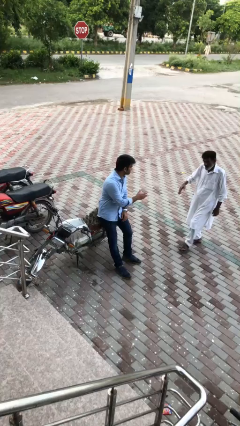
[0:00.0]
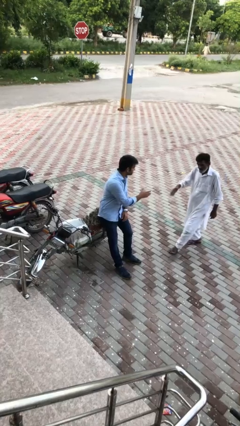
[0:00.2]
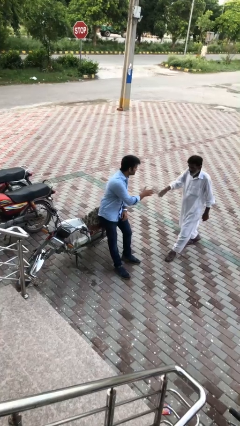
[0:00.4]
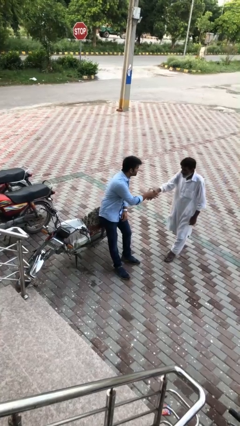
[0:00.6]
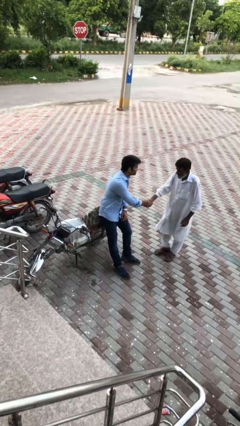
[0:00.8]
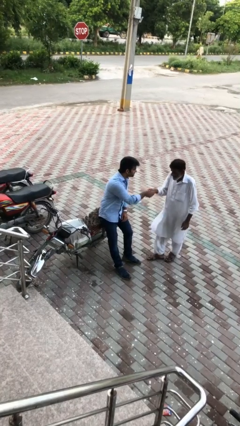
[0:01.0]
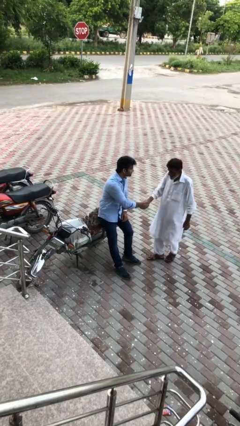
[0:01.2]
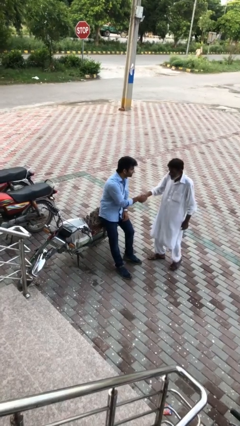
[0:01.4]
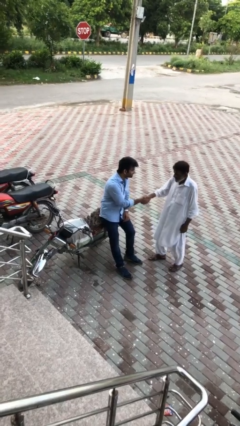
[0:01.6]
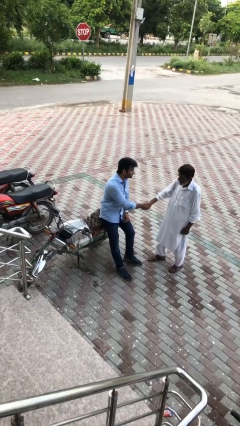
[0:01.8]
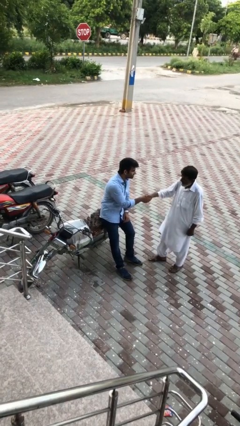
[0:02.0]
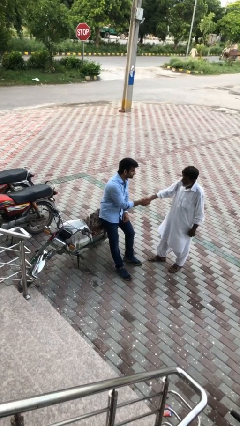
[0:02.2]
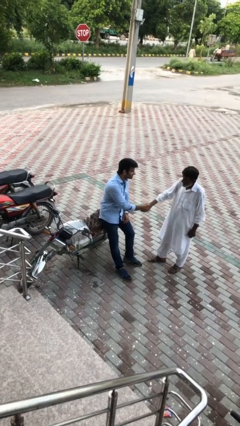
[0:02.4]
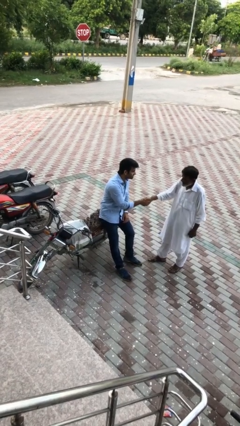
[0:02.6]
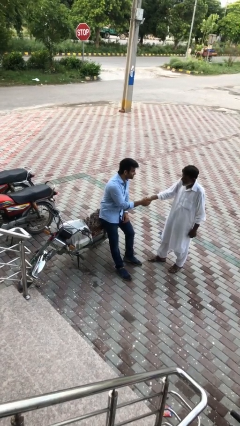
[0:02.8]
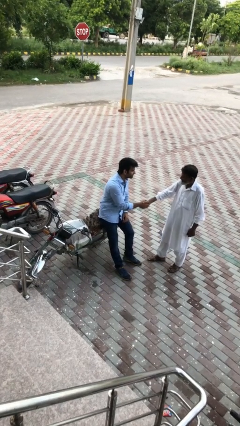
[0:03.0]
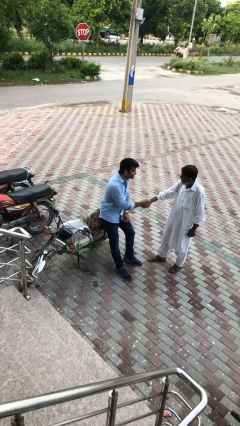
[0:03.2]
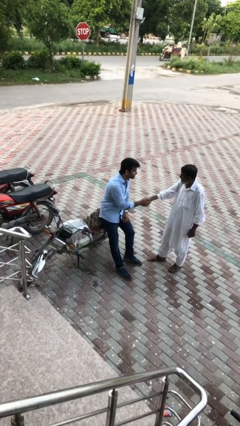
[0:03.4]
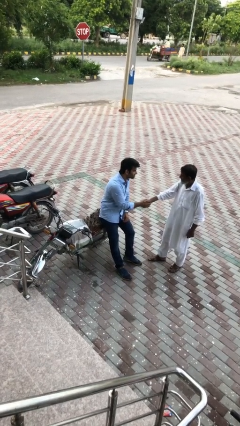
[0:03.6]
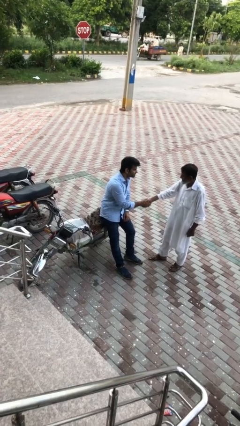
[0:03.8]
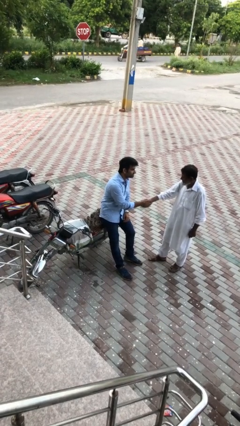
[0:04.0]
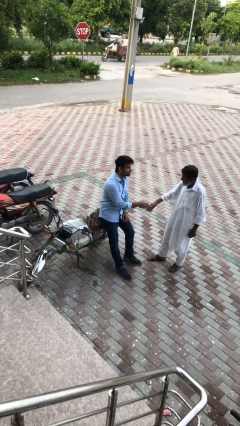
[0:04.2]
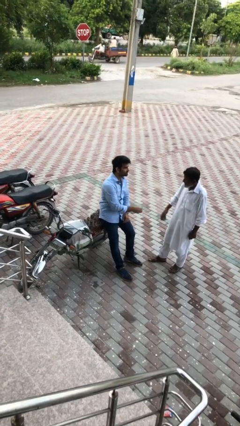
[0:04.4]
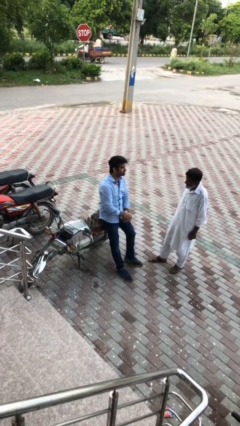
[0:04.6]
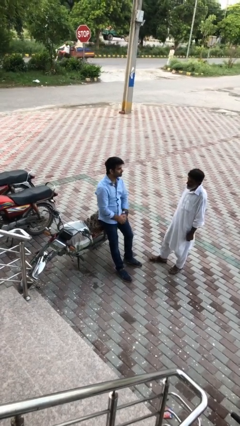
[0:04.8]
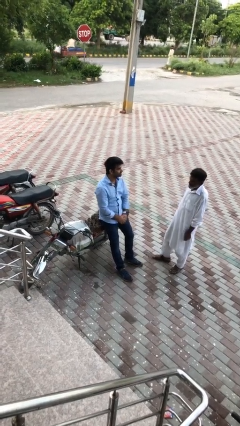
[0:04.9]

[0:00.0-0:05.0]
person shakes hand

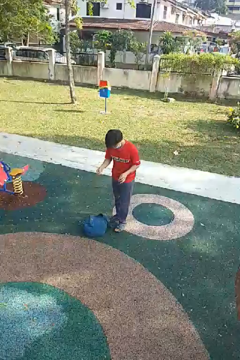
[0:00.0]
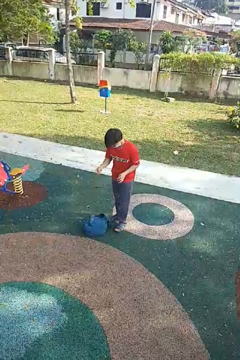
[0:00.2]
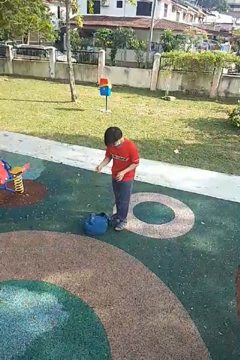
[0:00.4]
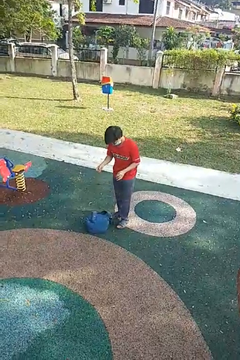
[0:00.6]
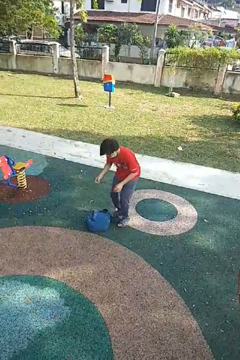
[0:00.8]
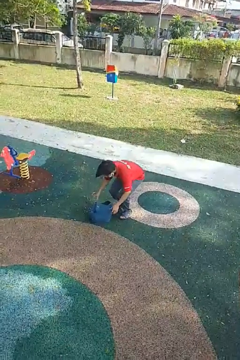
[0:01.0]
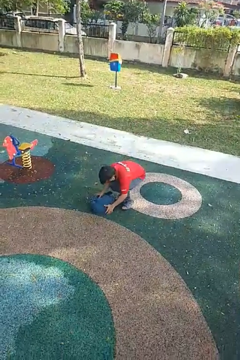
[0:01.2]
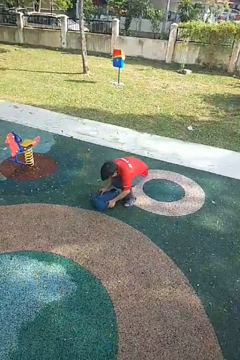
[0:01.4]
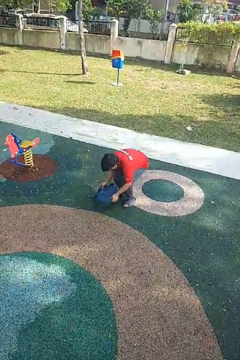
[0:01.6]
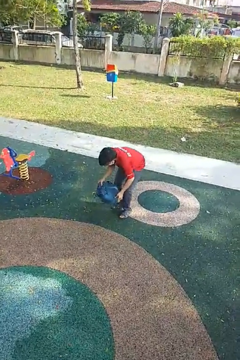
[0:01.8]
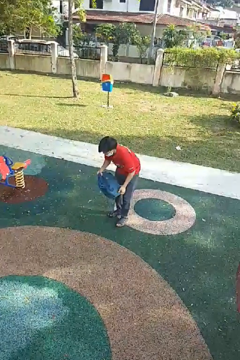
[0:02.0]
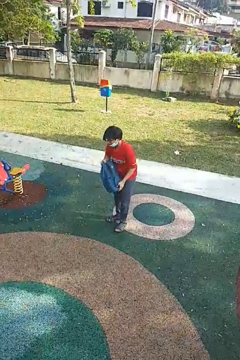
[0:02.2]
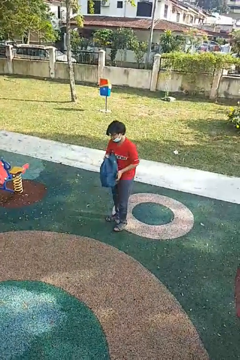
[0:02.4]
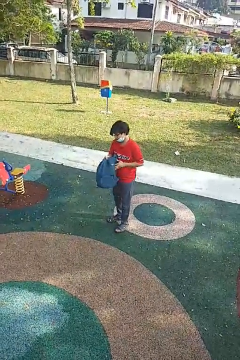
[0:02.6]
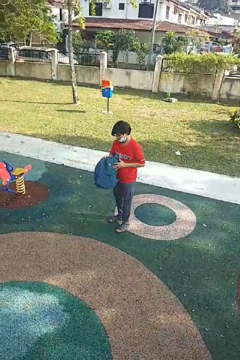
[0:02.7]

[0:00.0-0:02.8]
person picks up object from floor

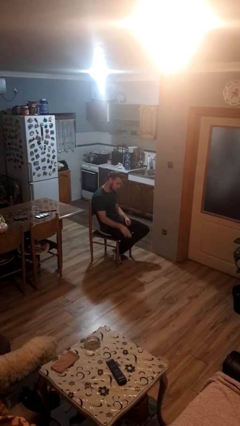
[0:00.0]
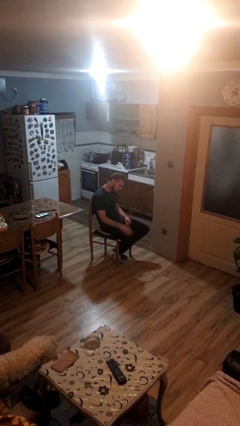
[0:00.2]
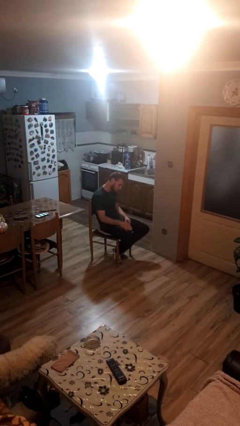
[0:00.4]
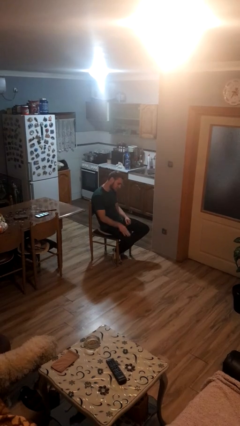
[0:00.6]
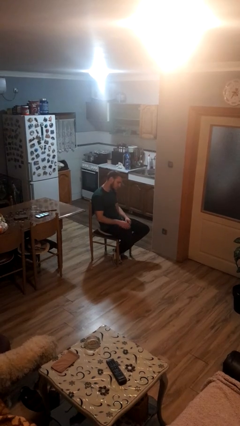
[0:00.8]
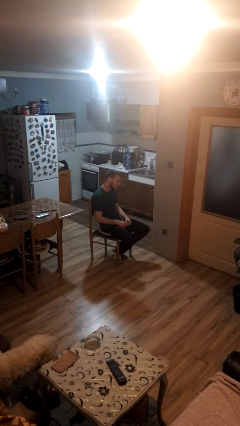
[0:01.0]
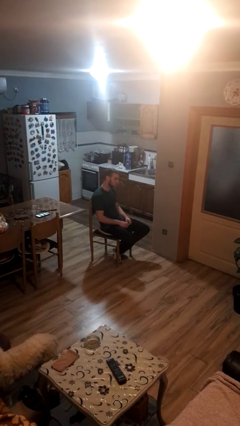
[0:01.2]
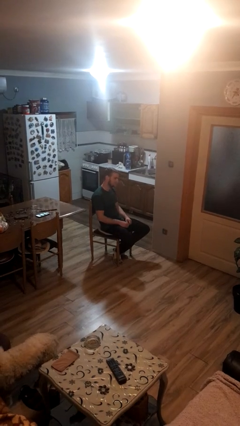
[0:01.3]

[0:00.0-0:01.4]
person slaps hands on thighs

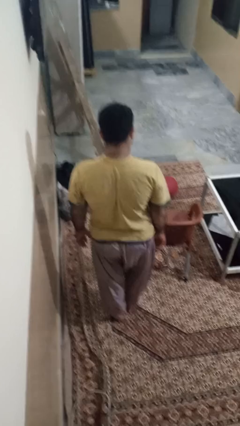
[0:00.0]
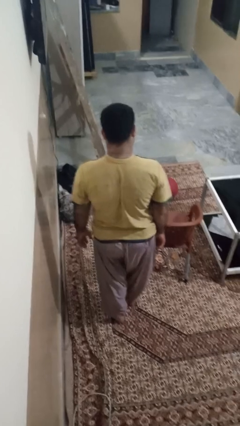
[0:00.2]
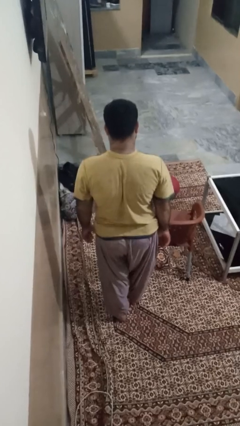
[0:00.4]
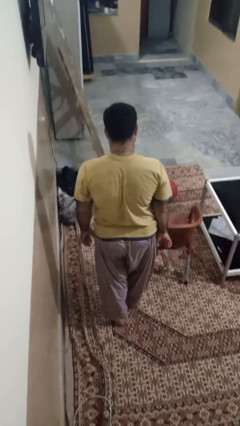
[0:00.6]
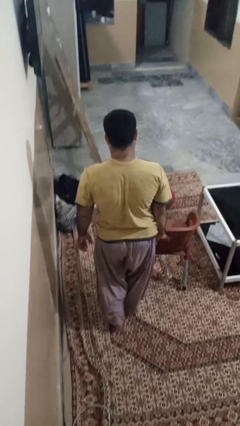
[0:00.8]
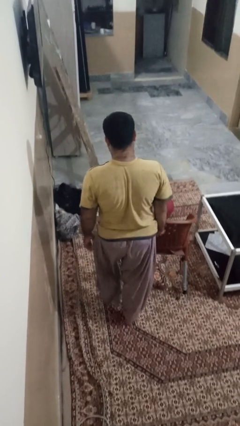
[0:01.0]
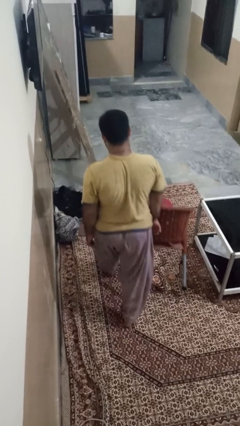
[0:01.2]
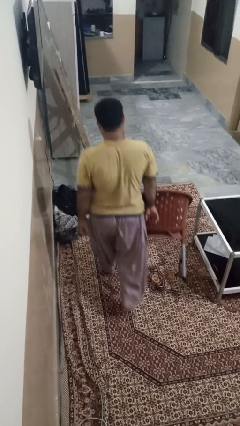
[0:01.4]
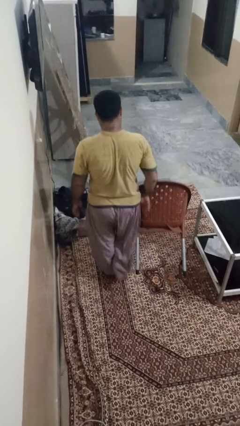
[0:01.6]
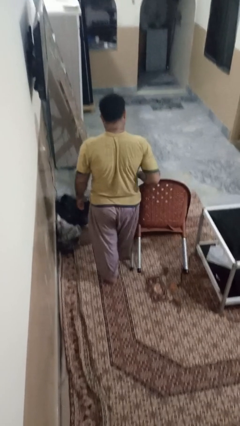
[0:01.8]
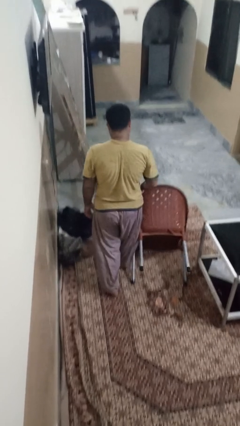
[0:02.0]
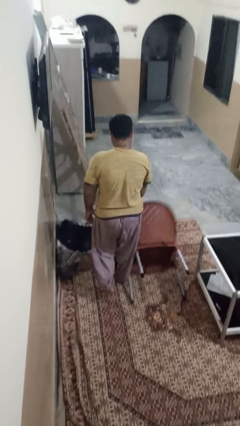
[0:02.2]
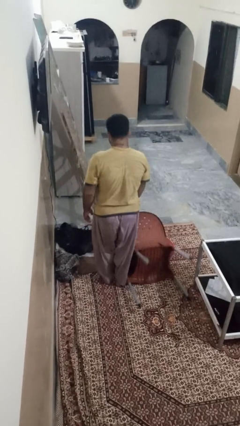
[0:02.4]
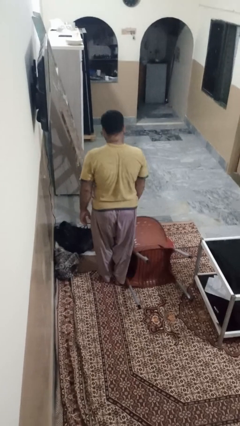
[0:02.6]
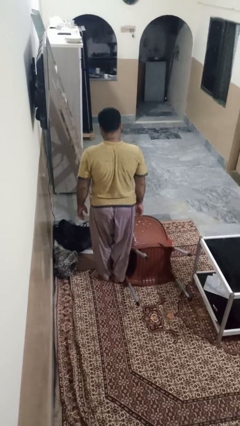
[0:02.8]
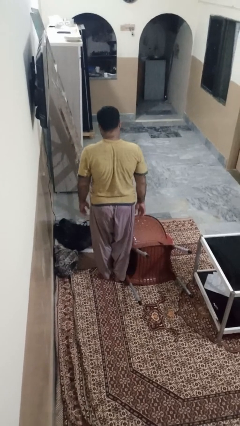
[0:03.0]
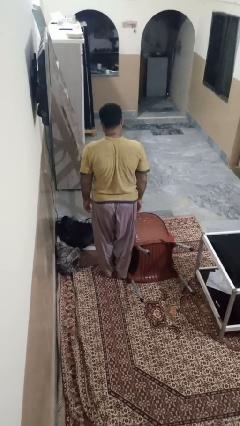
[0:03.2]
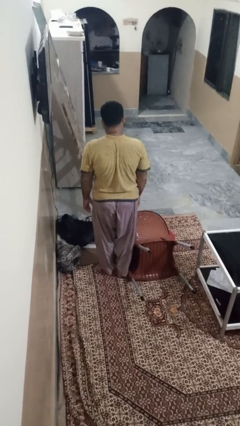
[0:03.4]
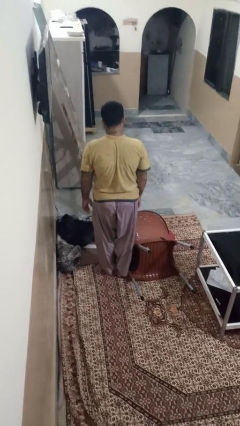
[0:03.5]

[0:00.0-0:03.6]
person knocks over furniture

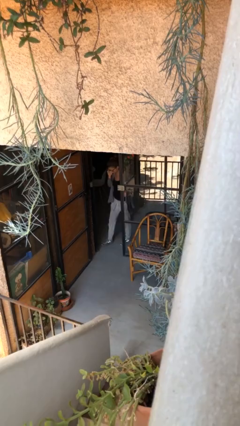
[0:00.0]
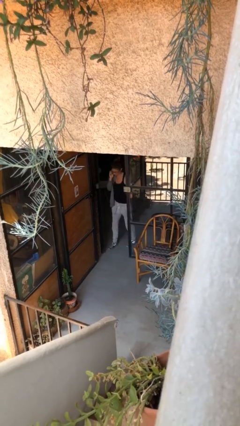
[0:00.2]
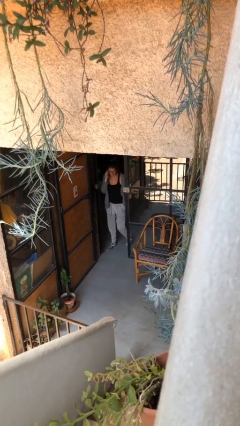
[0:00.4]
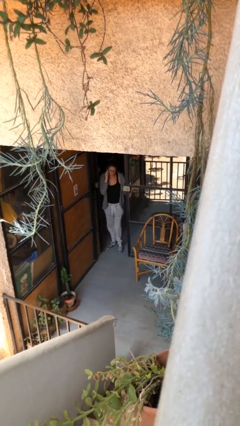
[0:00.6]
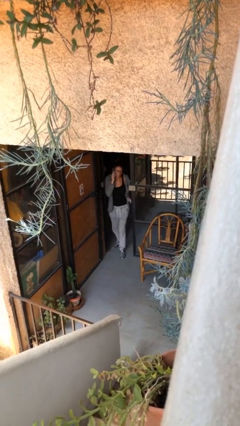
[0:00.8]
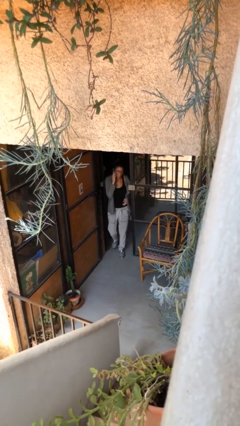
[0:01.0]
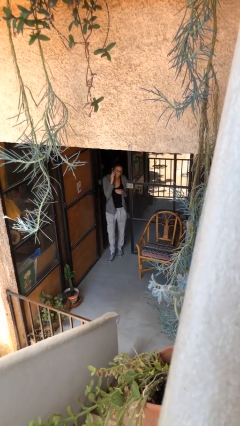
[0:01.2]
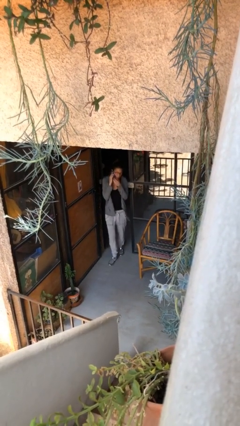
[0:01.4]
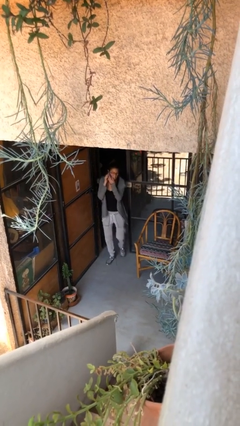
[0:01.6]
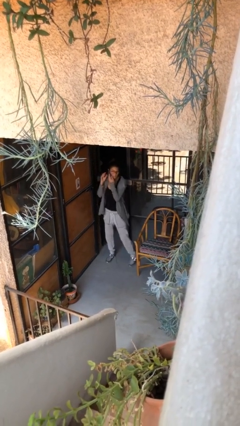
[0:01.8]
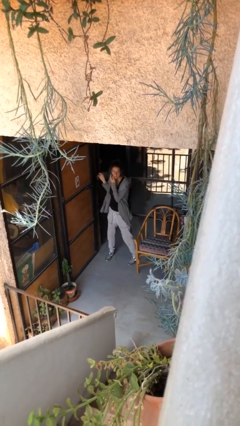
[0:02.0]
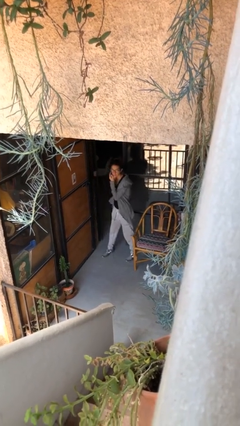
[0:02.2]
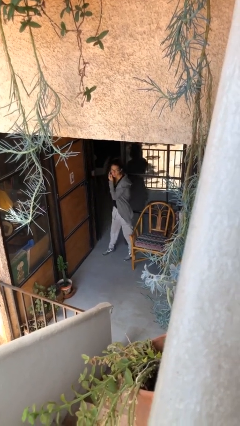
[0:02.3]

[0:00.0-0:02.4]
person enters scene through structure

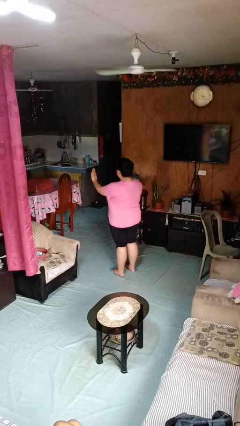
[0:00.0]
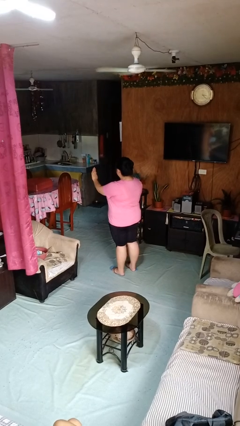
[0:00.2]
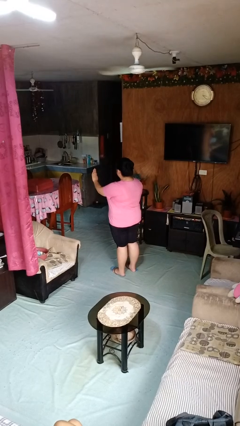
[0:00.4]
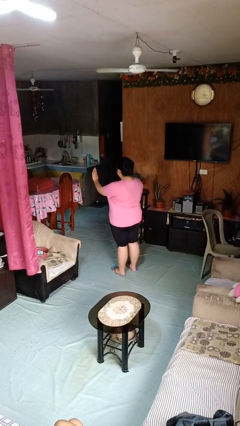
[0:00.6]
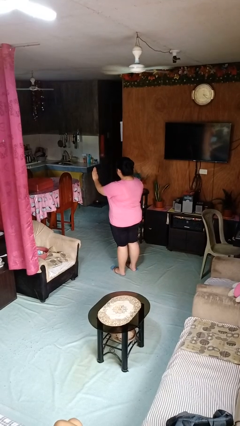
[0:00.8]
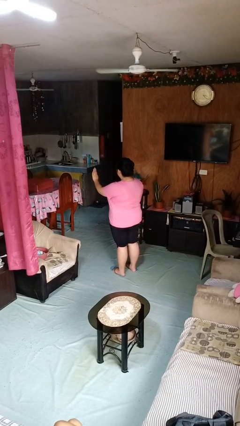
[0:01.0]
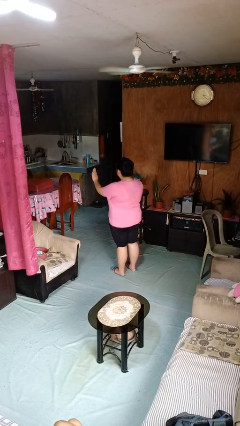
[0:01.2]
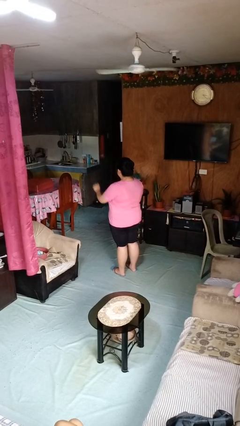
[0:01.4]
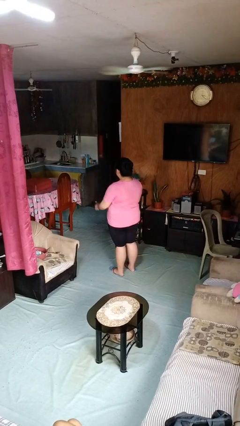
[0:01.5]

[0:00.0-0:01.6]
person gestures stop

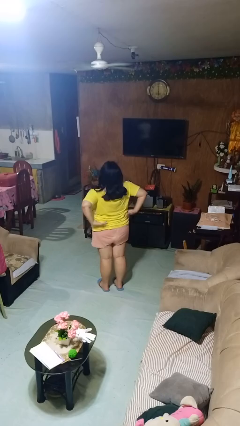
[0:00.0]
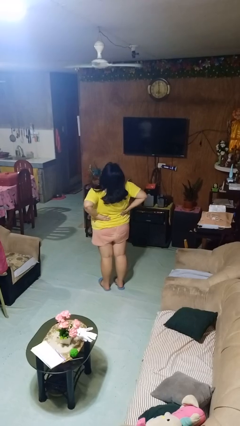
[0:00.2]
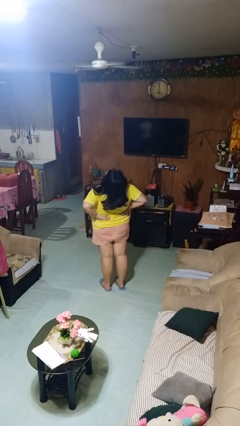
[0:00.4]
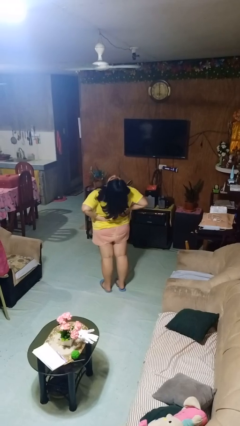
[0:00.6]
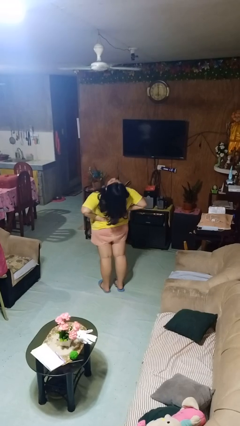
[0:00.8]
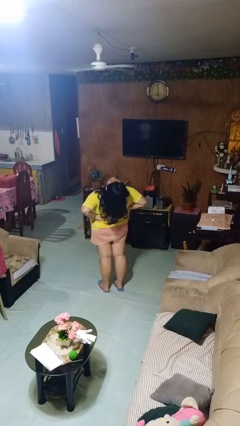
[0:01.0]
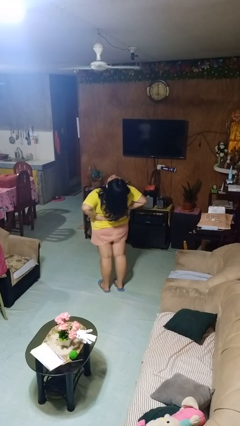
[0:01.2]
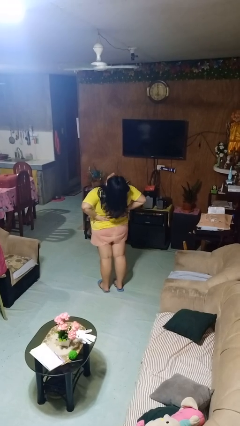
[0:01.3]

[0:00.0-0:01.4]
person stretches back
